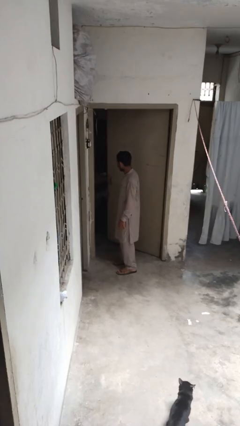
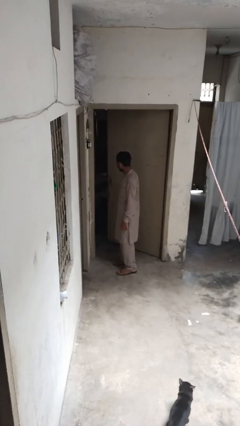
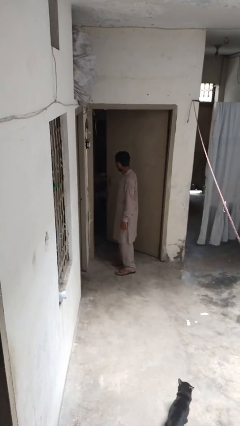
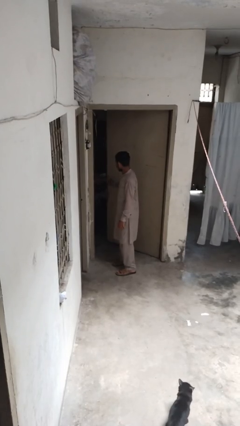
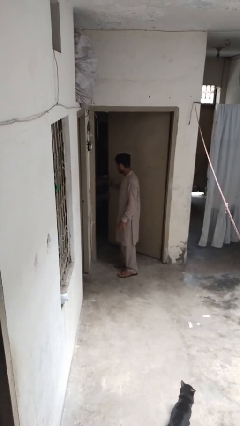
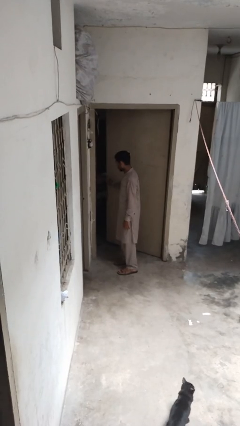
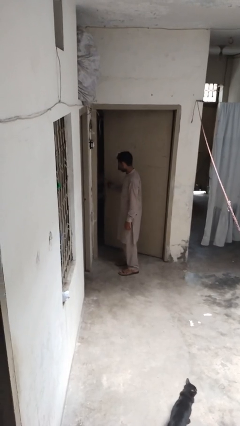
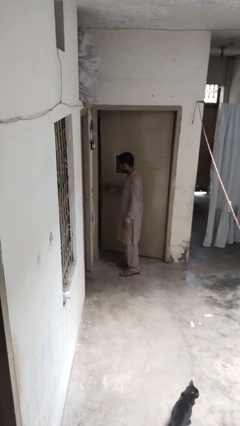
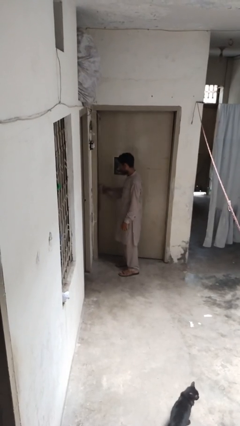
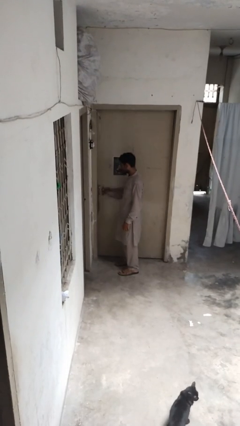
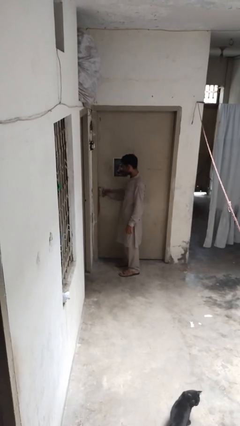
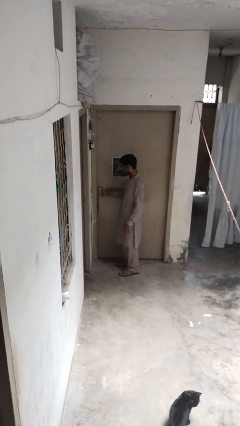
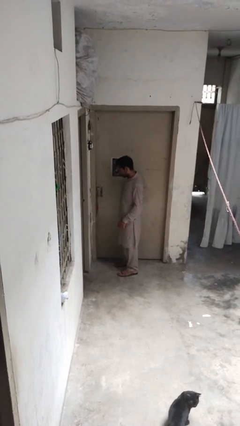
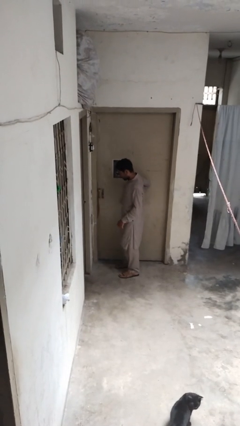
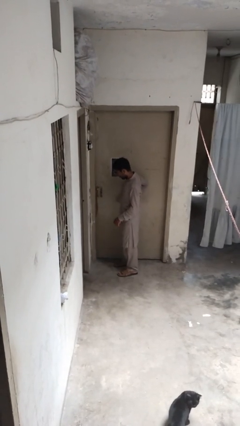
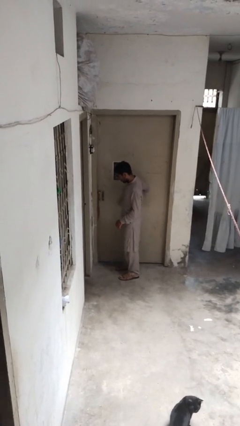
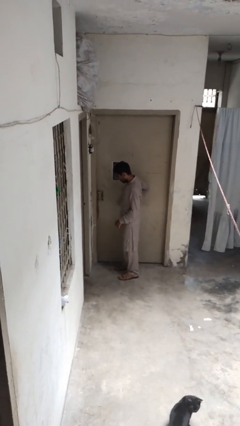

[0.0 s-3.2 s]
person closes door with hip

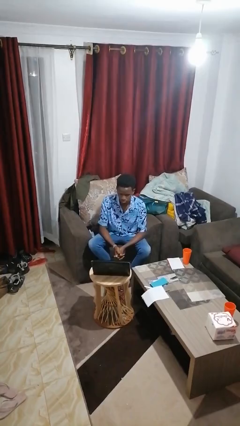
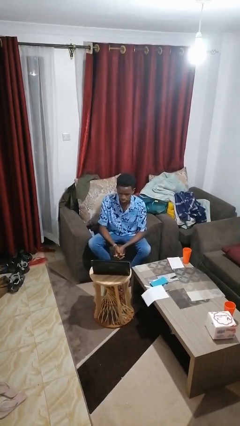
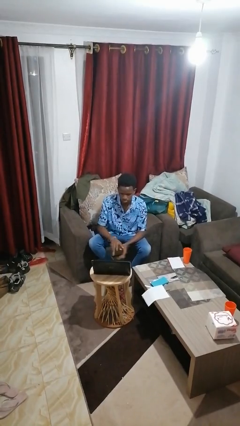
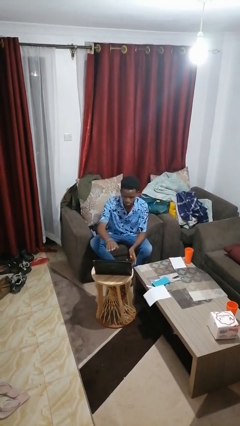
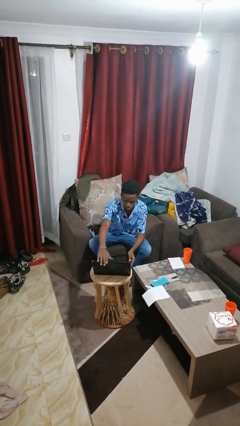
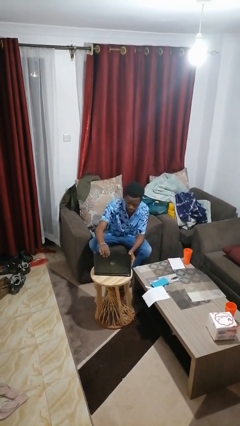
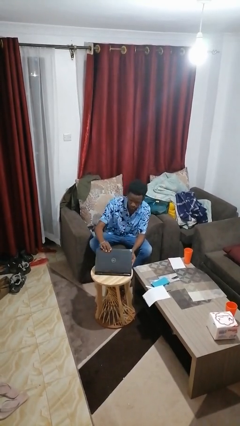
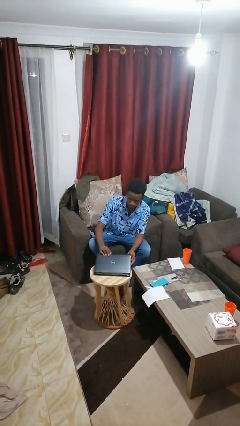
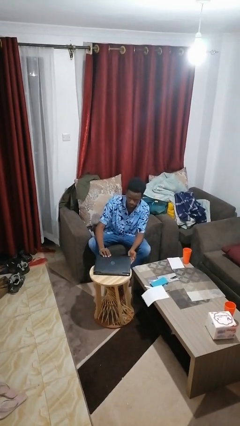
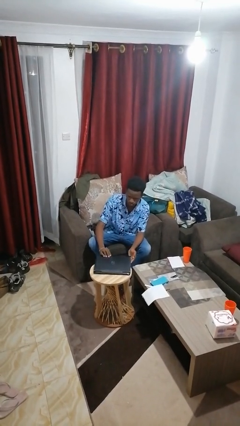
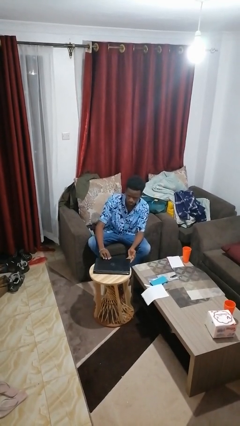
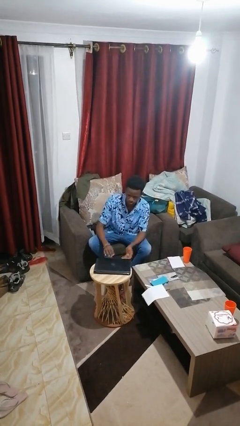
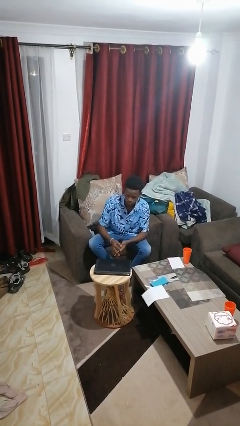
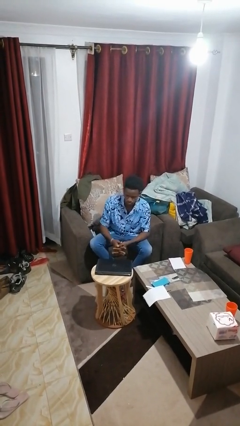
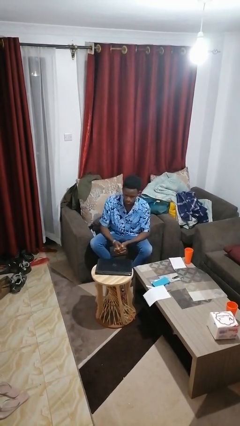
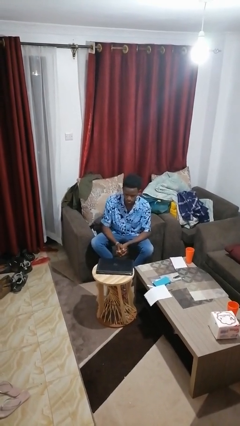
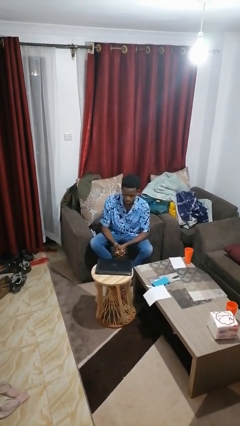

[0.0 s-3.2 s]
person closes laptop

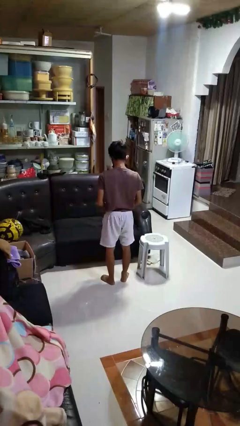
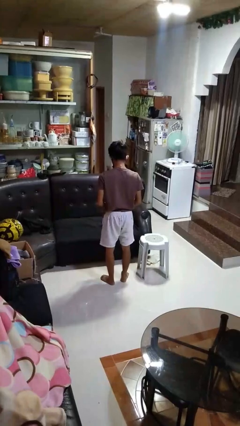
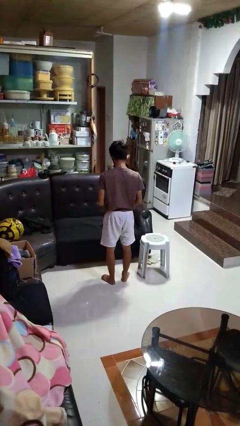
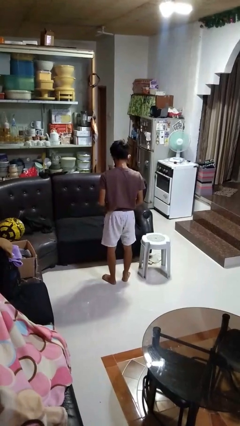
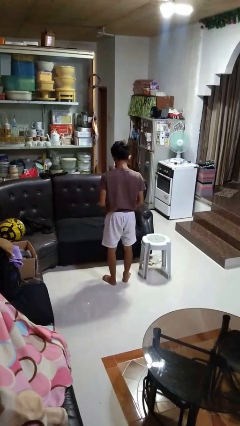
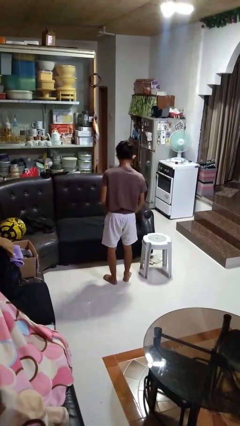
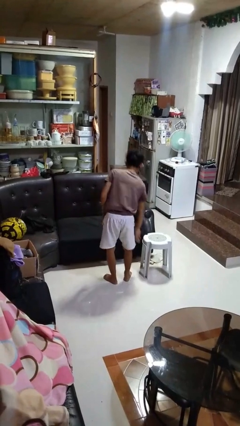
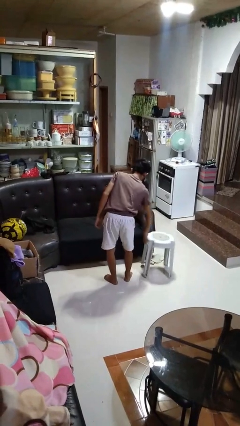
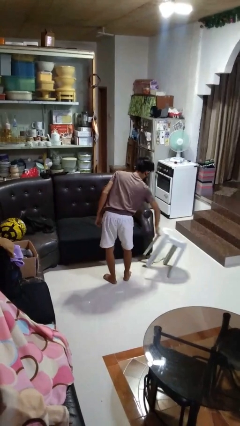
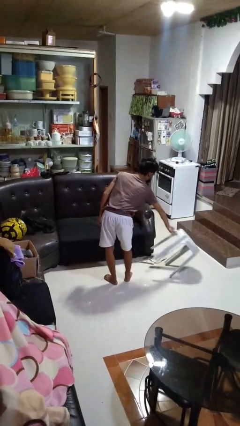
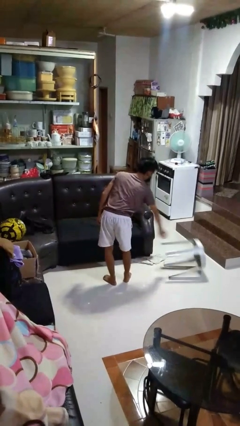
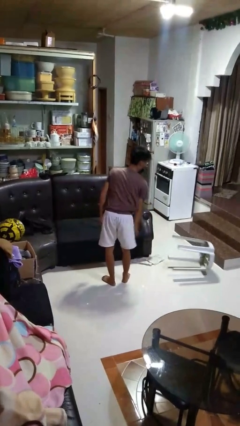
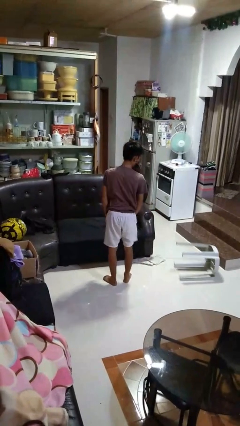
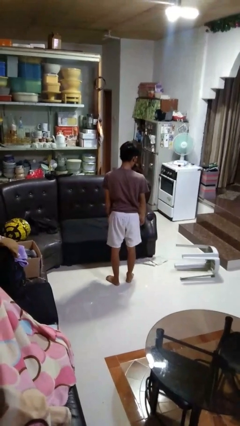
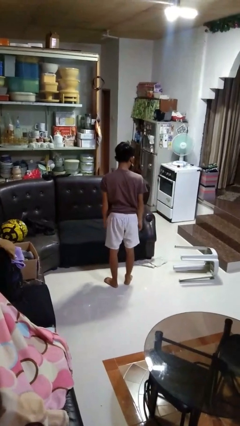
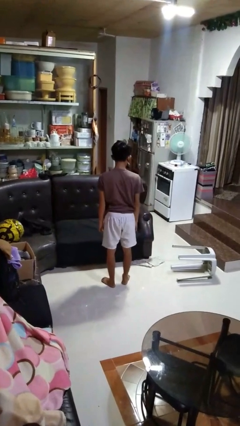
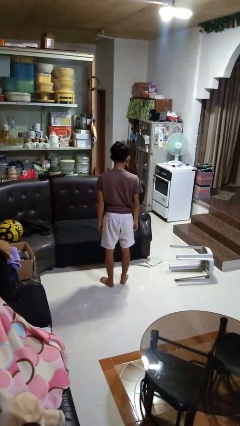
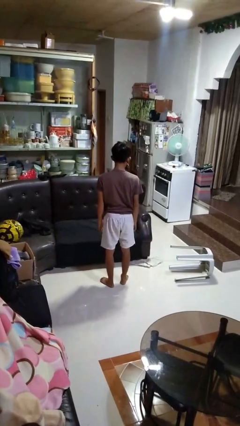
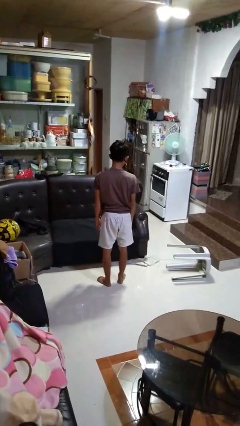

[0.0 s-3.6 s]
person knocks over furniture

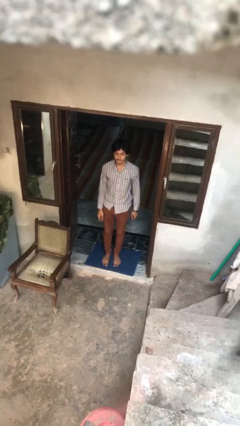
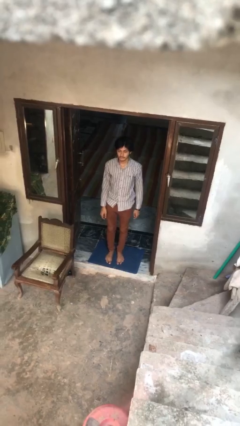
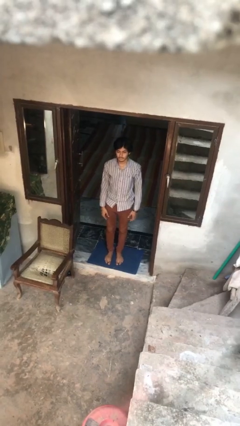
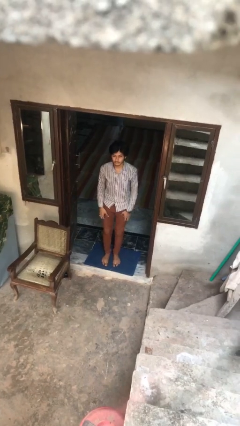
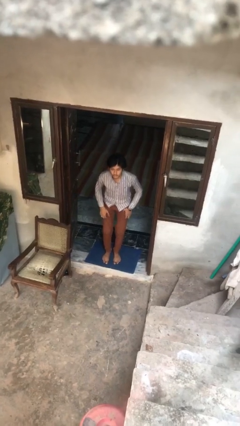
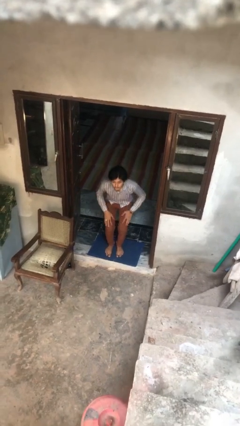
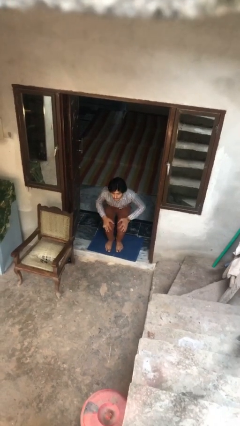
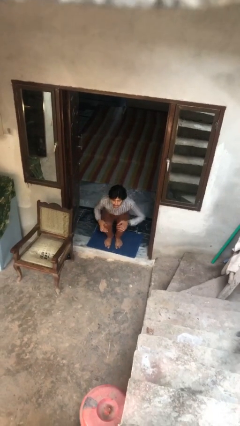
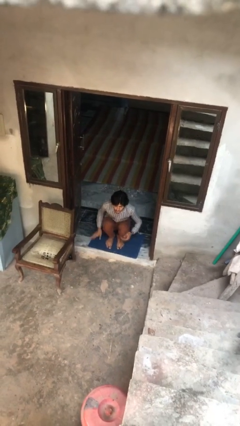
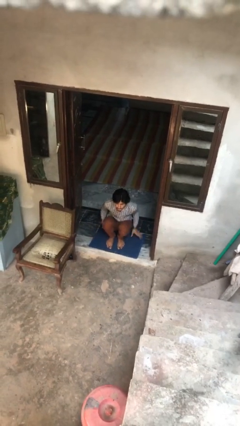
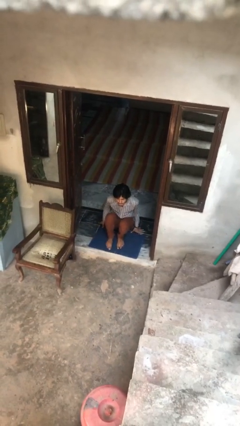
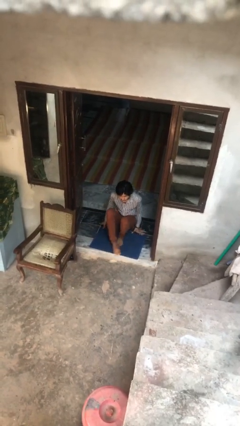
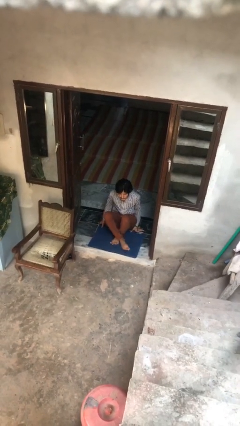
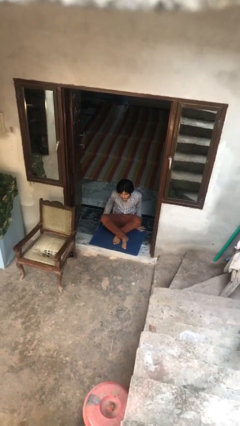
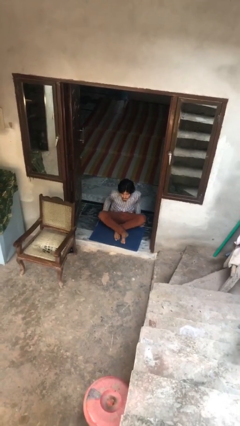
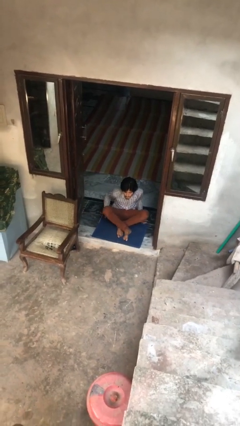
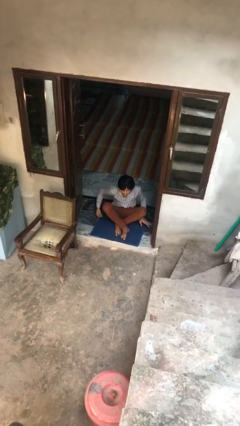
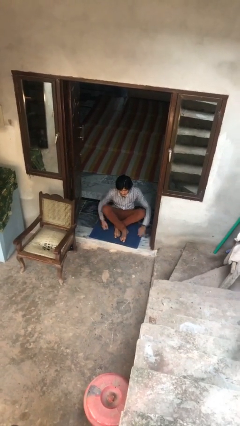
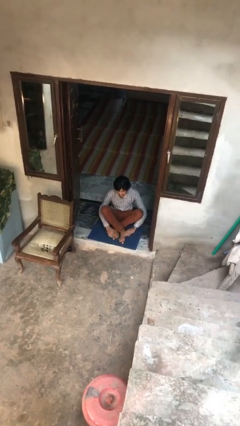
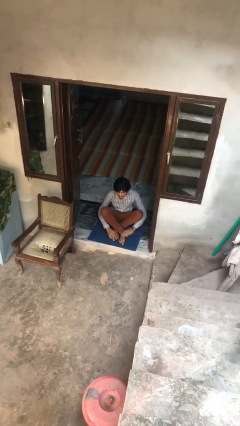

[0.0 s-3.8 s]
person sits crisscross

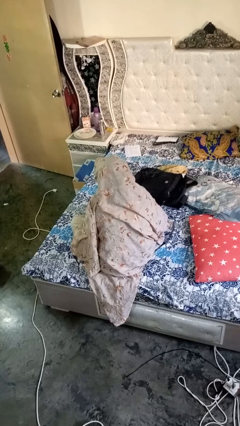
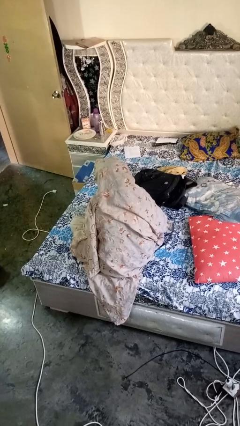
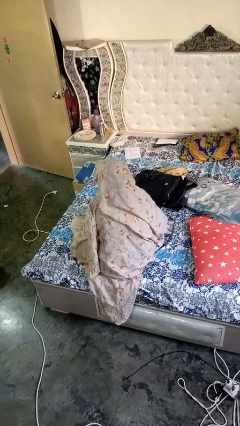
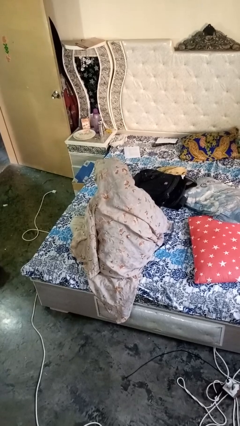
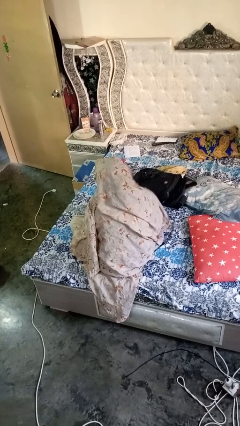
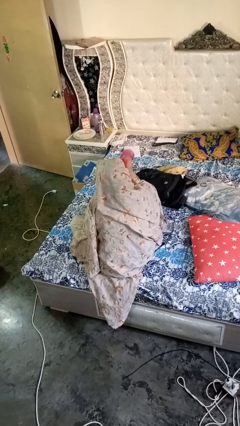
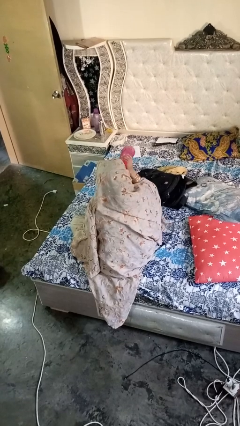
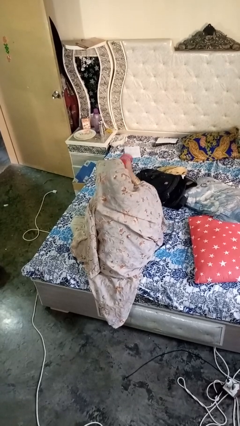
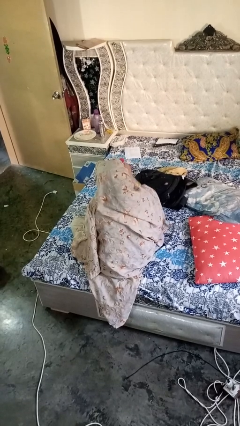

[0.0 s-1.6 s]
person drinks from bottle

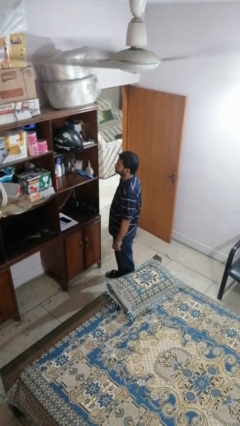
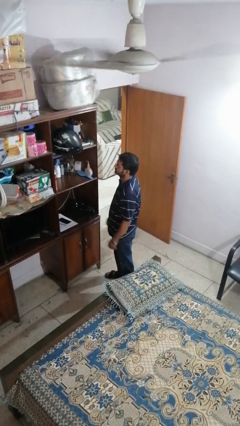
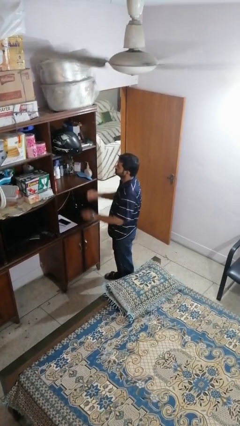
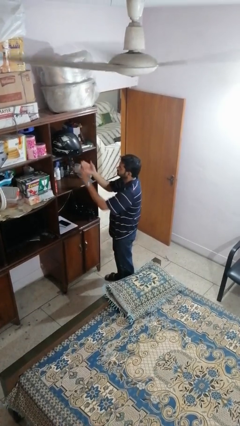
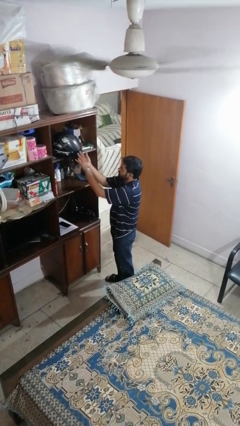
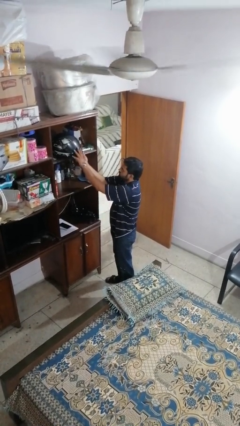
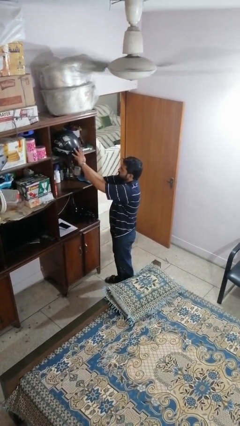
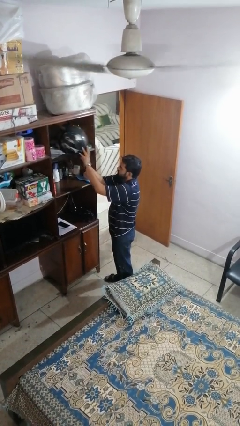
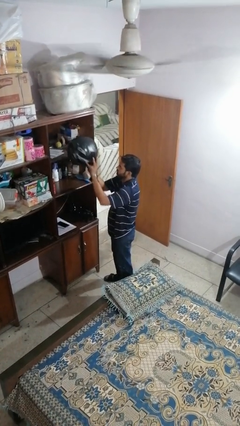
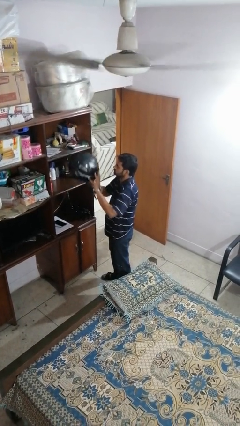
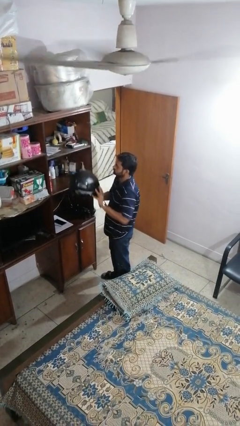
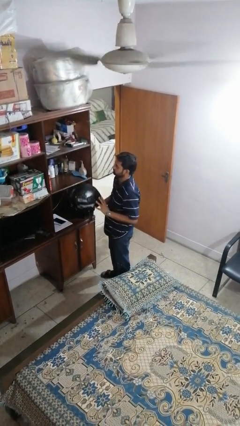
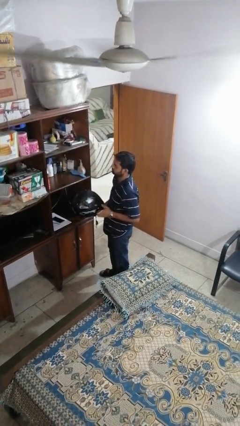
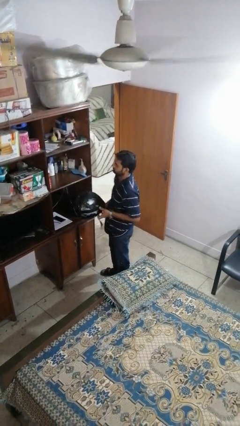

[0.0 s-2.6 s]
person picks up object from shelf
